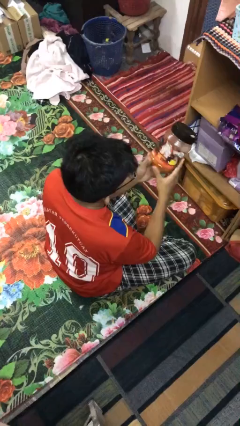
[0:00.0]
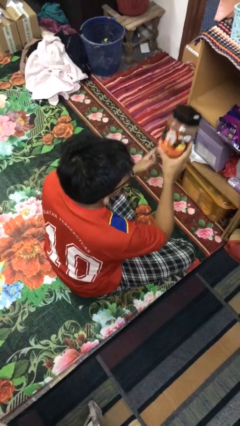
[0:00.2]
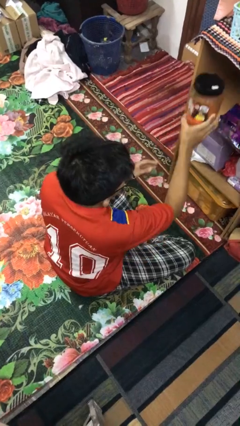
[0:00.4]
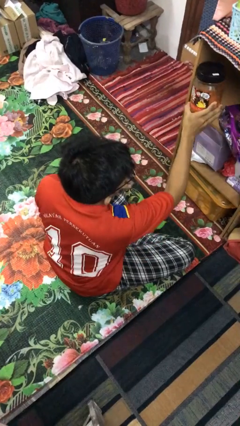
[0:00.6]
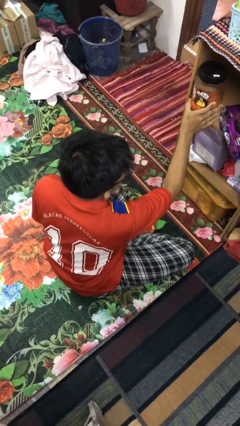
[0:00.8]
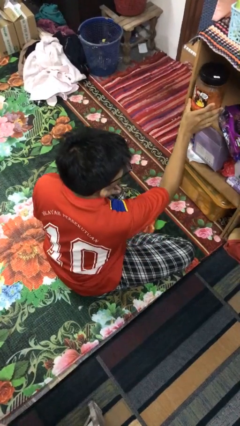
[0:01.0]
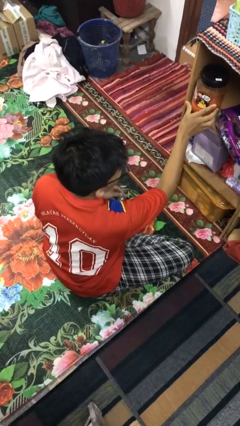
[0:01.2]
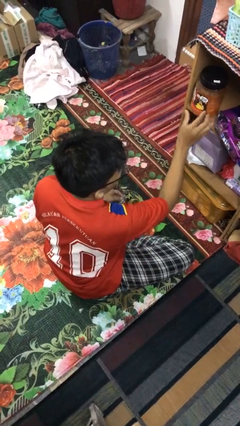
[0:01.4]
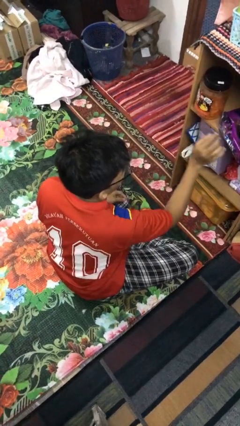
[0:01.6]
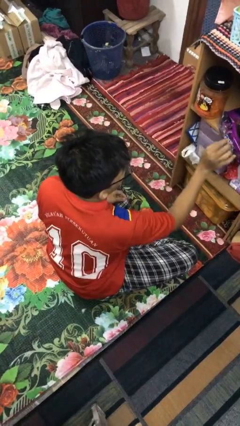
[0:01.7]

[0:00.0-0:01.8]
person puts down object into cabinet

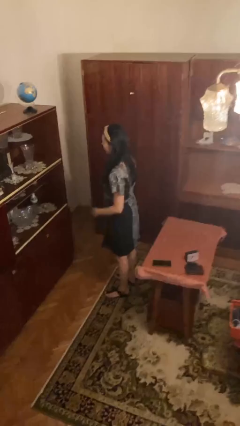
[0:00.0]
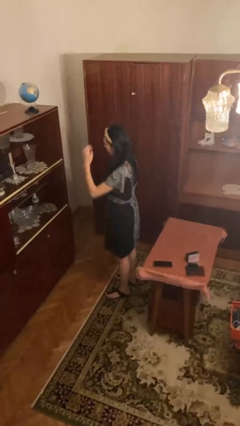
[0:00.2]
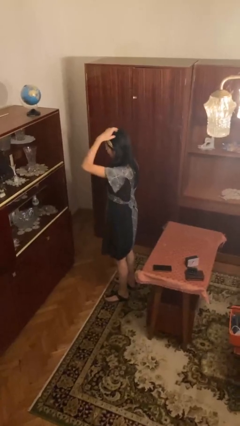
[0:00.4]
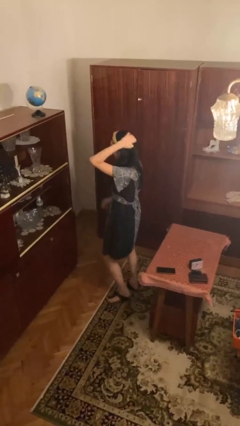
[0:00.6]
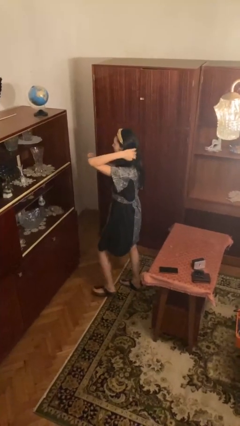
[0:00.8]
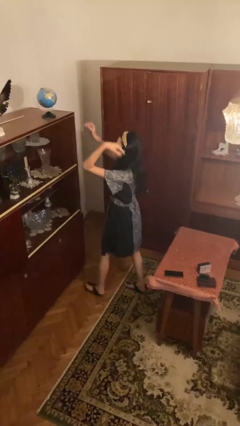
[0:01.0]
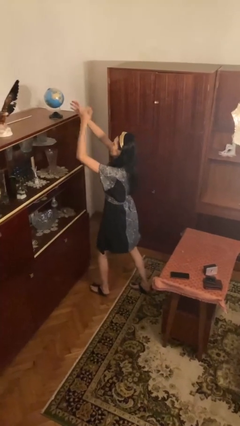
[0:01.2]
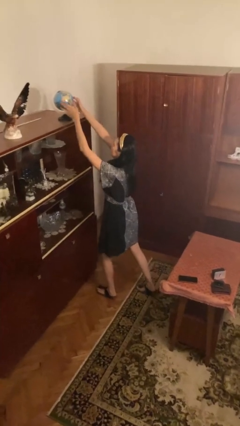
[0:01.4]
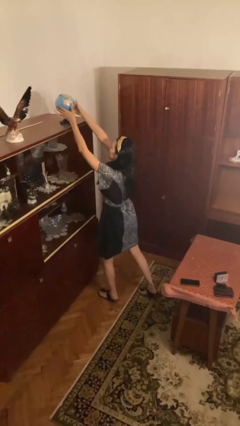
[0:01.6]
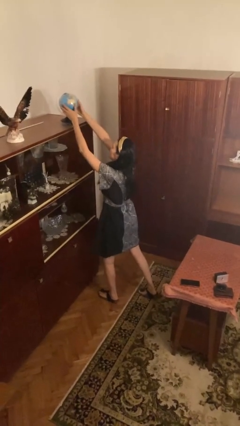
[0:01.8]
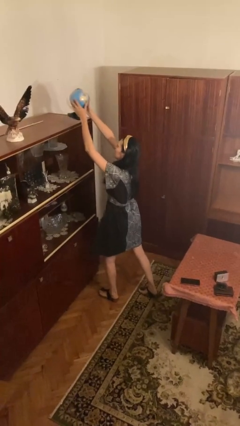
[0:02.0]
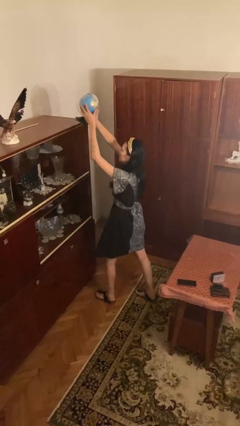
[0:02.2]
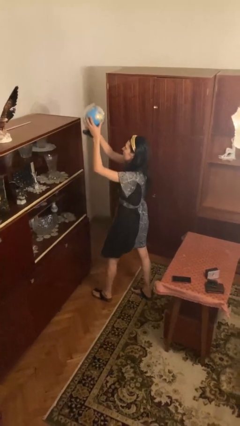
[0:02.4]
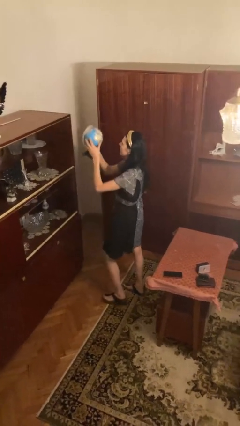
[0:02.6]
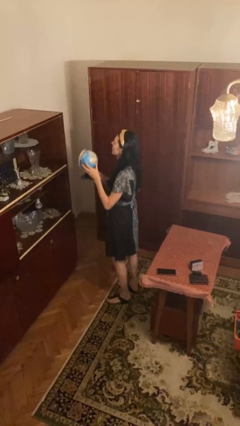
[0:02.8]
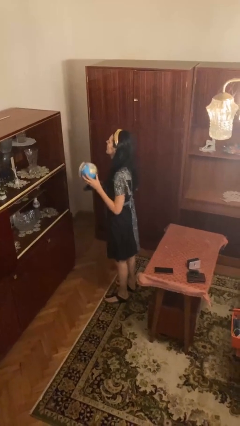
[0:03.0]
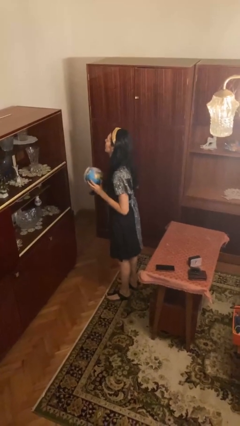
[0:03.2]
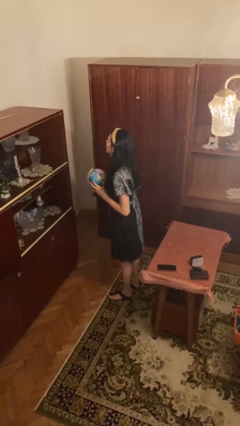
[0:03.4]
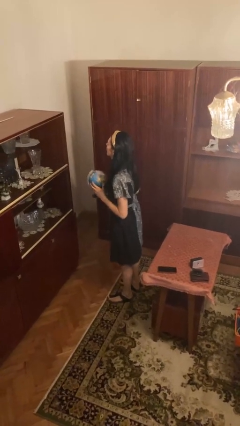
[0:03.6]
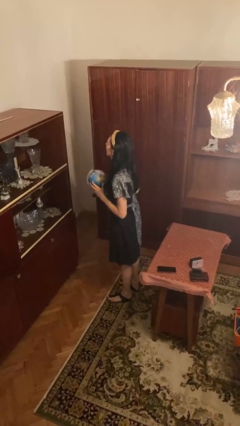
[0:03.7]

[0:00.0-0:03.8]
person picks up object from countertop

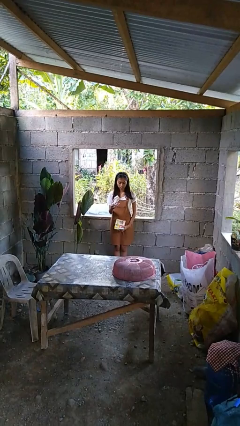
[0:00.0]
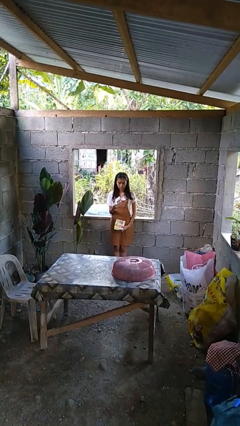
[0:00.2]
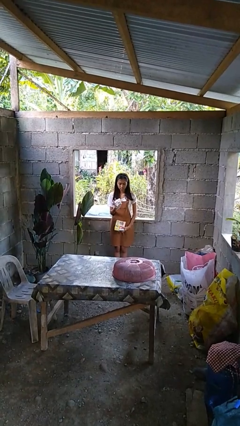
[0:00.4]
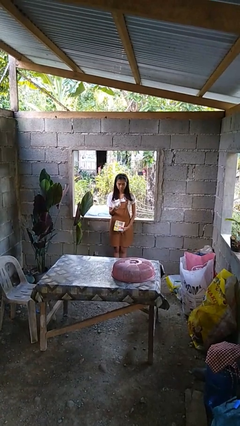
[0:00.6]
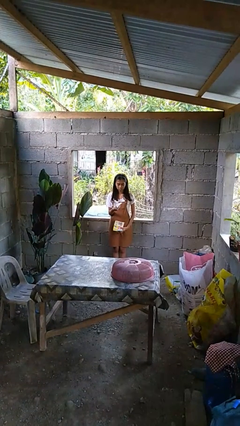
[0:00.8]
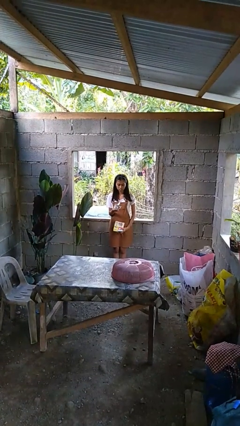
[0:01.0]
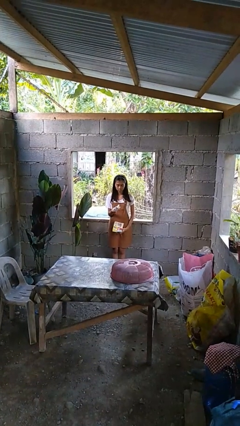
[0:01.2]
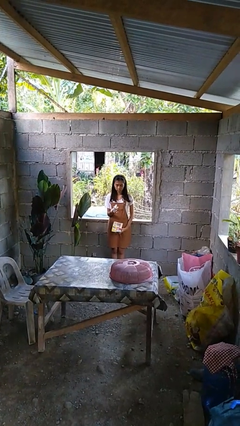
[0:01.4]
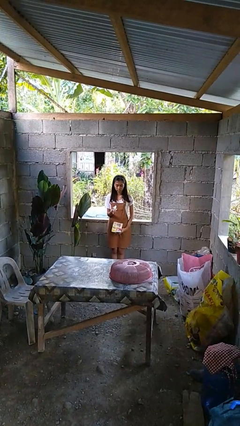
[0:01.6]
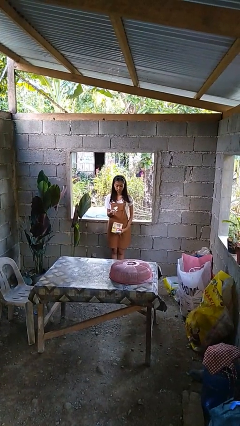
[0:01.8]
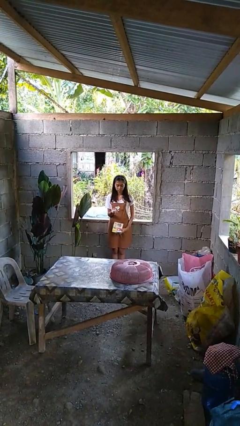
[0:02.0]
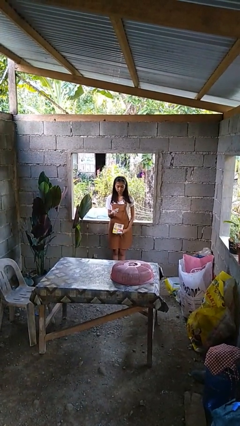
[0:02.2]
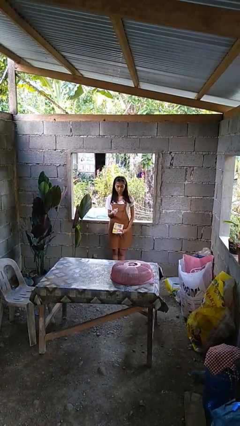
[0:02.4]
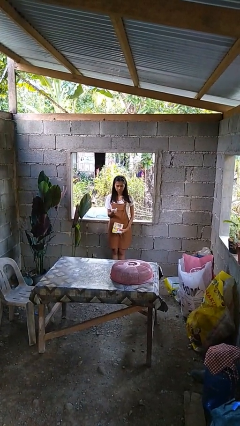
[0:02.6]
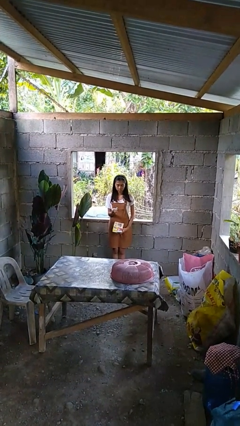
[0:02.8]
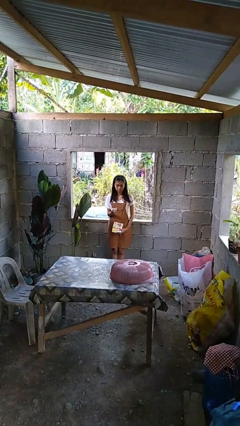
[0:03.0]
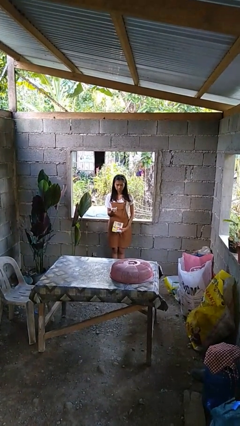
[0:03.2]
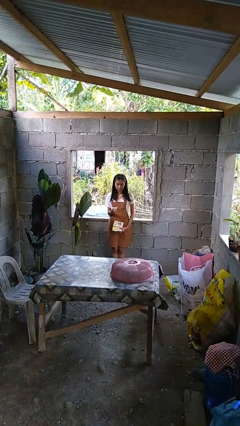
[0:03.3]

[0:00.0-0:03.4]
person crumples paper

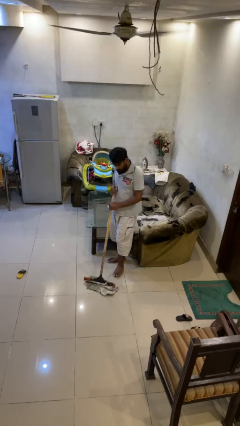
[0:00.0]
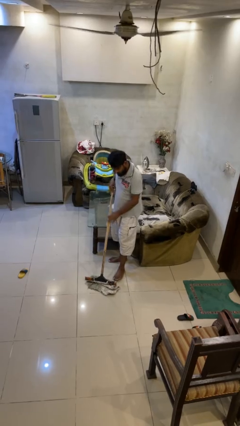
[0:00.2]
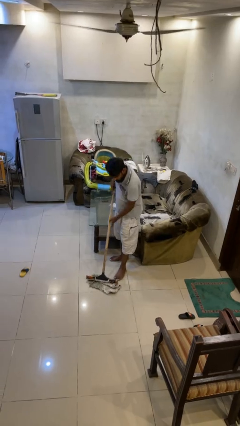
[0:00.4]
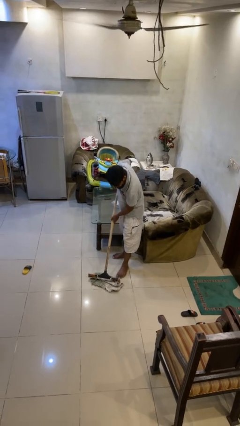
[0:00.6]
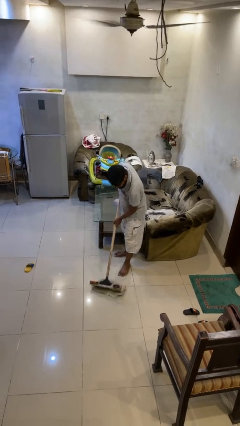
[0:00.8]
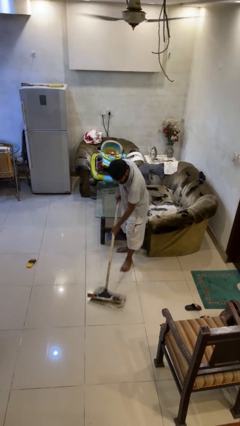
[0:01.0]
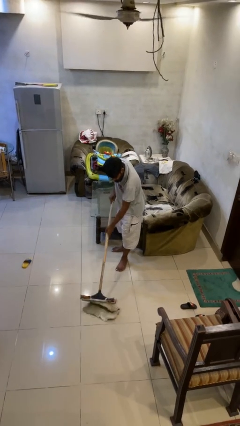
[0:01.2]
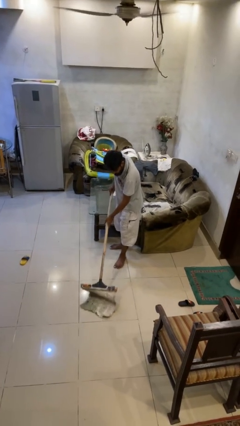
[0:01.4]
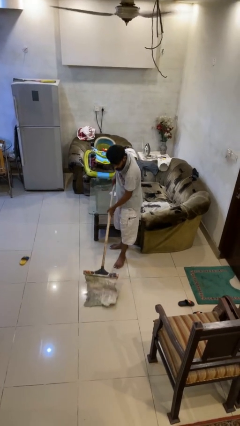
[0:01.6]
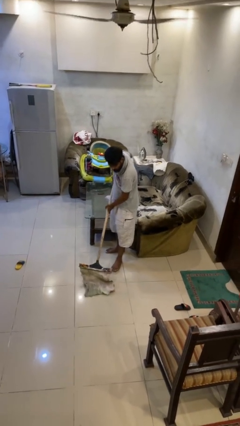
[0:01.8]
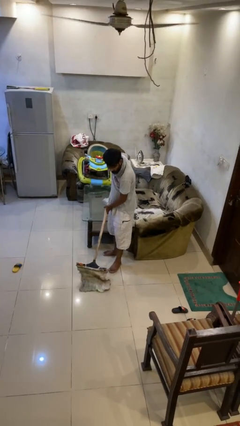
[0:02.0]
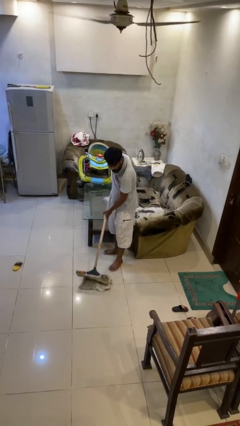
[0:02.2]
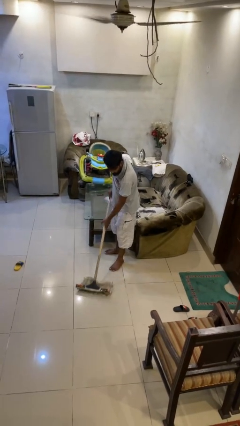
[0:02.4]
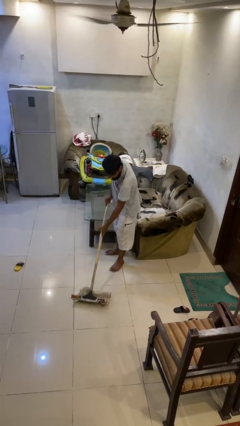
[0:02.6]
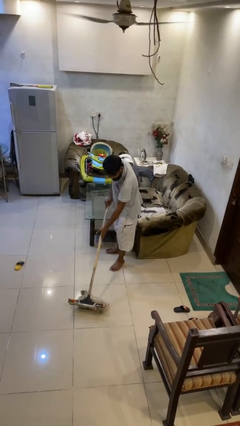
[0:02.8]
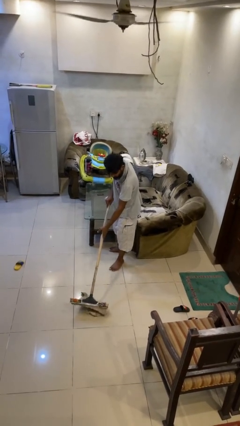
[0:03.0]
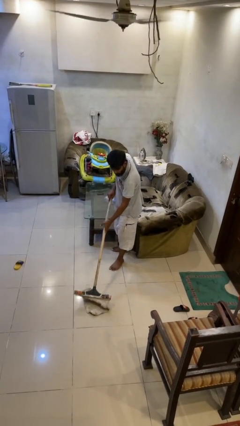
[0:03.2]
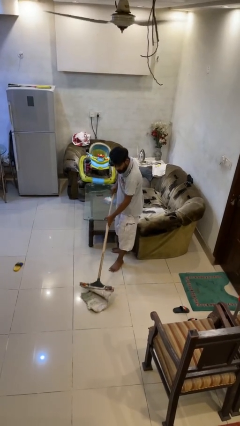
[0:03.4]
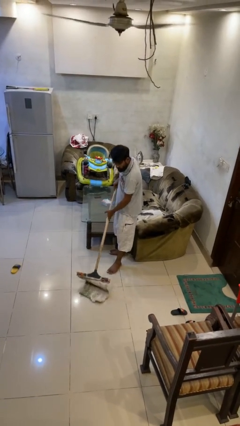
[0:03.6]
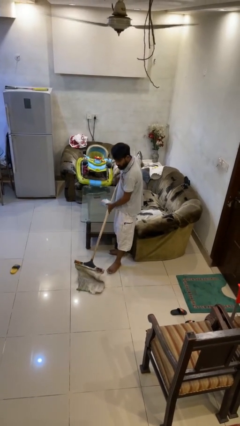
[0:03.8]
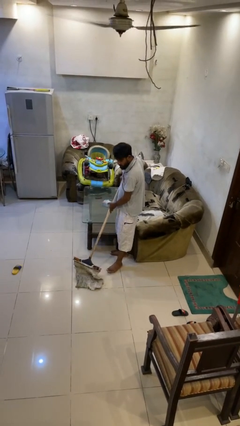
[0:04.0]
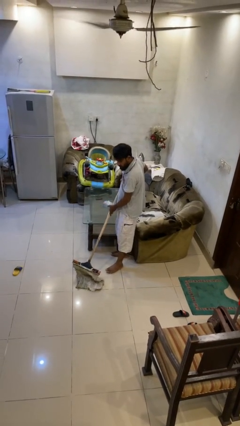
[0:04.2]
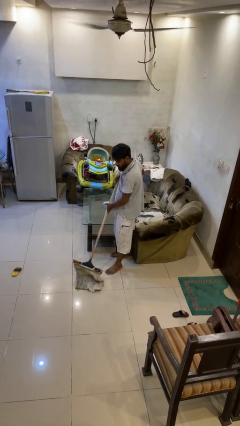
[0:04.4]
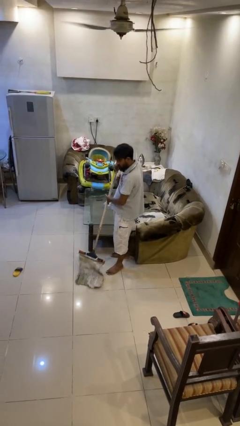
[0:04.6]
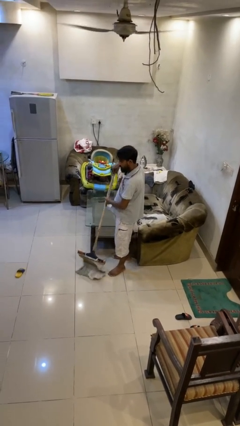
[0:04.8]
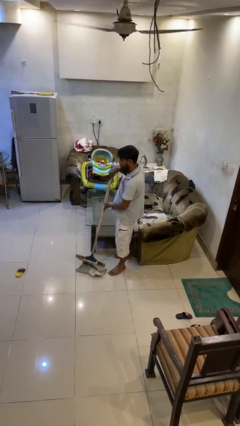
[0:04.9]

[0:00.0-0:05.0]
person mops

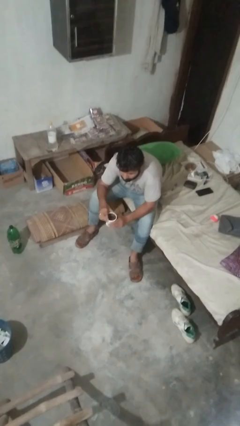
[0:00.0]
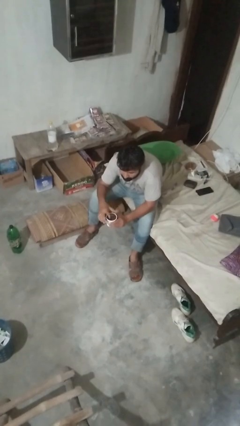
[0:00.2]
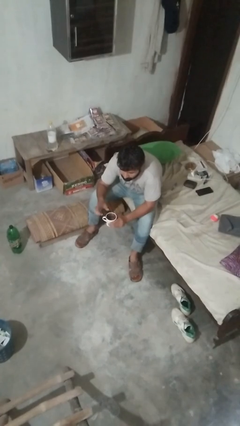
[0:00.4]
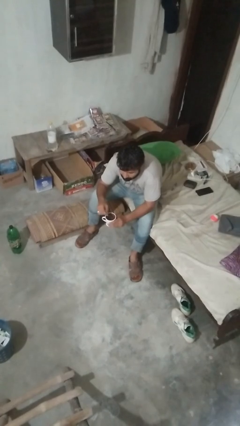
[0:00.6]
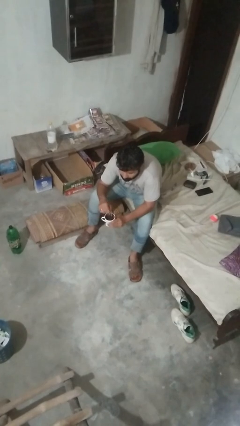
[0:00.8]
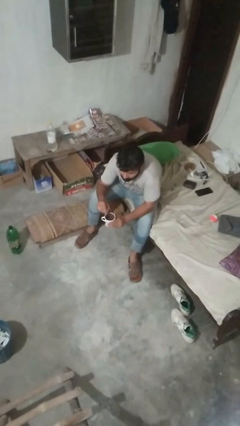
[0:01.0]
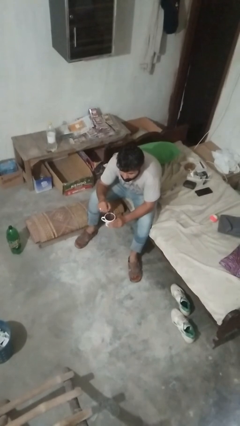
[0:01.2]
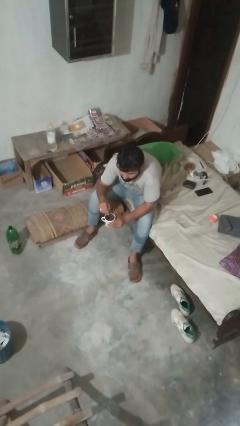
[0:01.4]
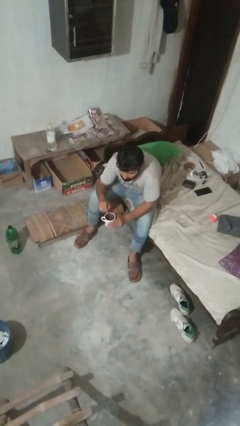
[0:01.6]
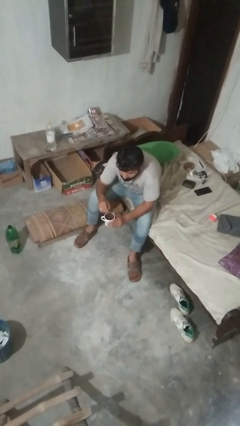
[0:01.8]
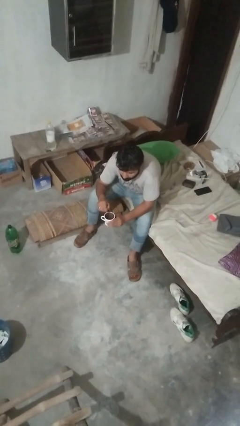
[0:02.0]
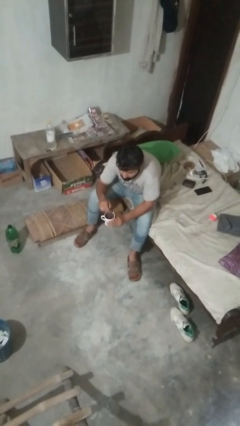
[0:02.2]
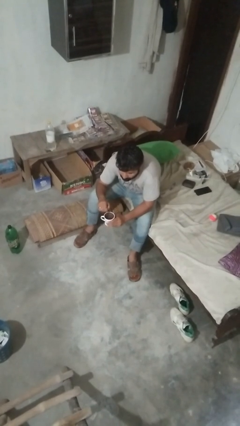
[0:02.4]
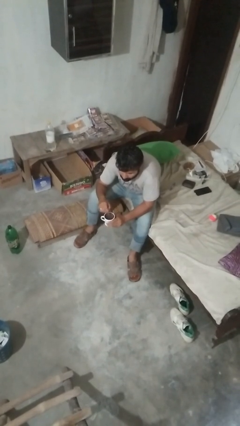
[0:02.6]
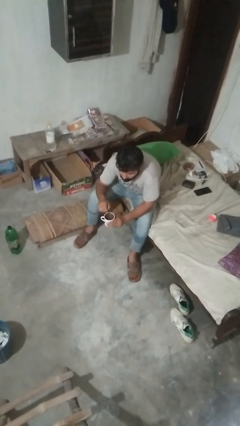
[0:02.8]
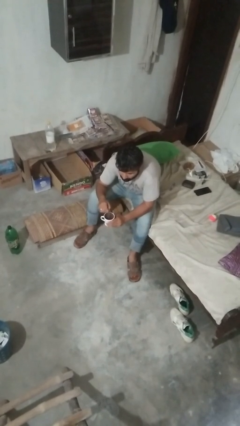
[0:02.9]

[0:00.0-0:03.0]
person stirs mug

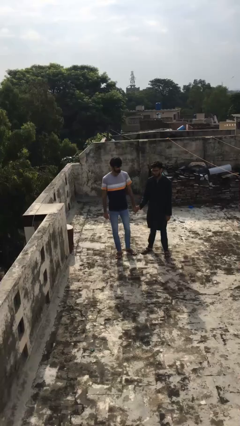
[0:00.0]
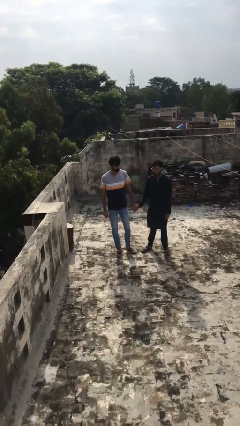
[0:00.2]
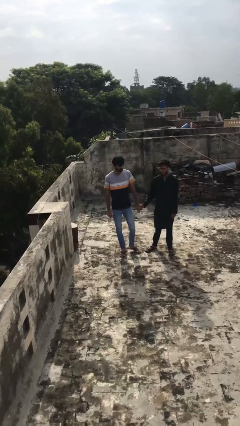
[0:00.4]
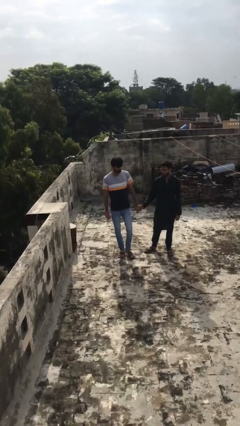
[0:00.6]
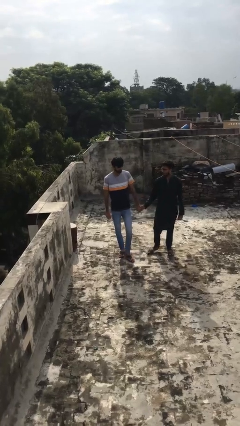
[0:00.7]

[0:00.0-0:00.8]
person holds hand
